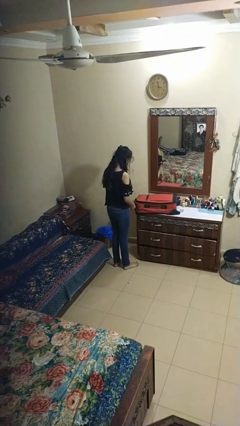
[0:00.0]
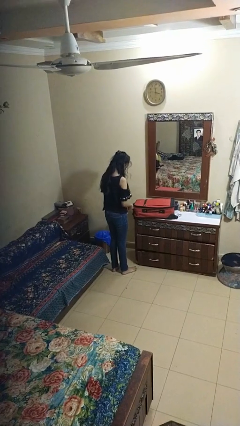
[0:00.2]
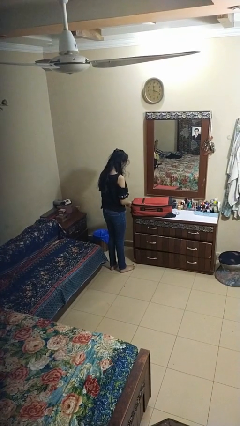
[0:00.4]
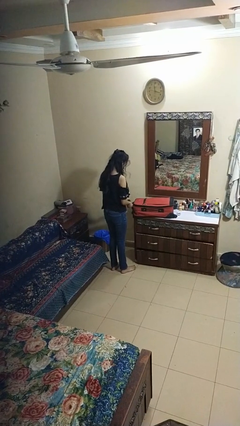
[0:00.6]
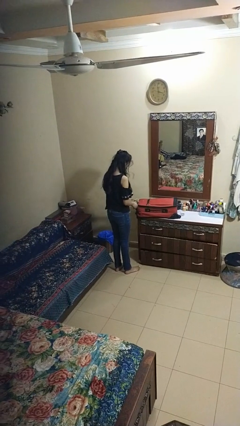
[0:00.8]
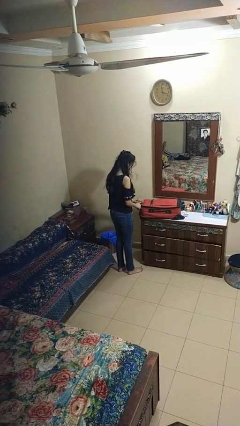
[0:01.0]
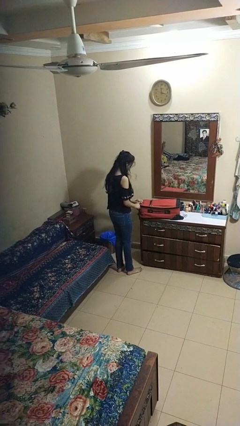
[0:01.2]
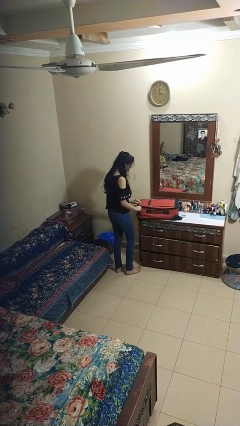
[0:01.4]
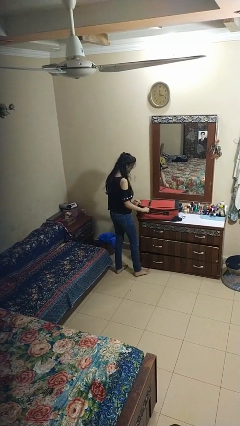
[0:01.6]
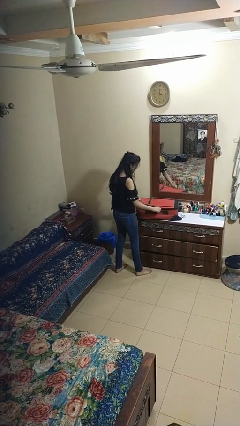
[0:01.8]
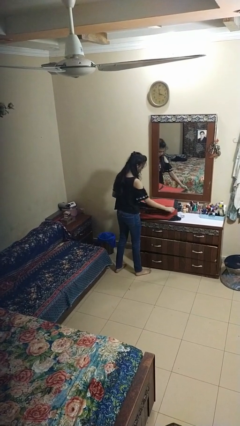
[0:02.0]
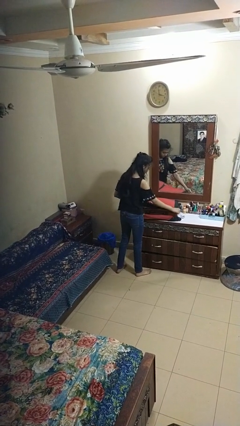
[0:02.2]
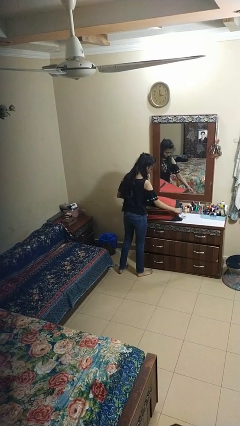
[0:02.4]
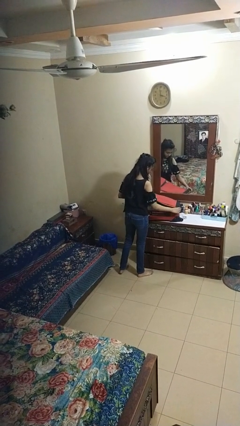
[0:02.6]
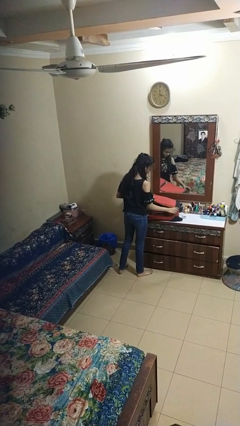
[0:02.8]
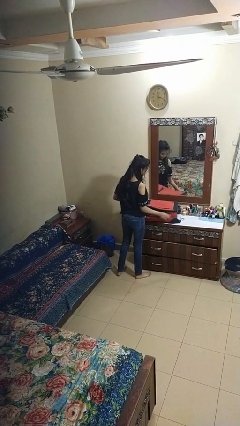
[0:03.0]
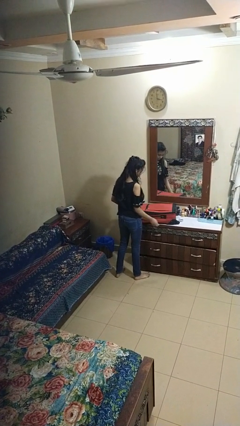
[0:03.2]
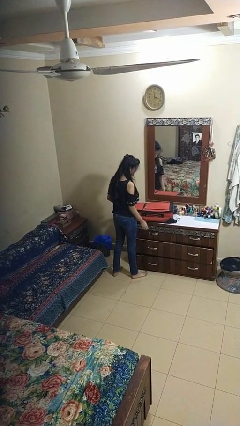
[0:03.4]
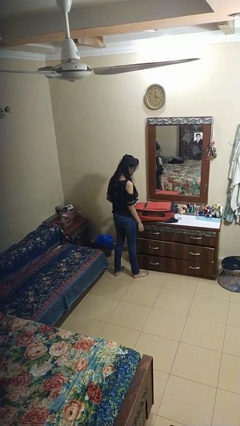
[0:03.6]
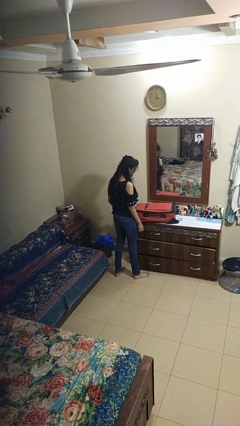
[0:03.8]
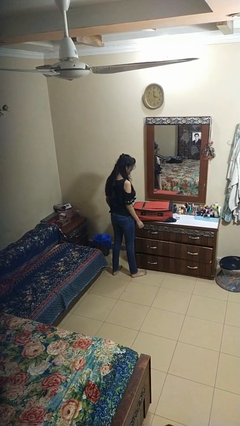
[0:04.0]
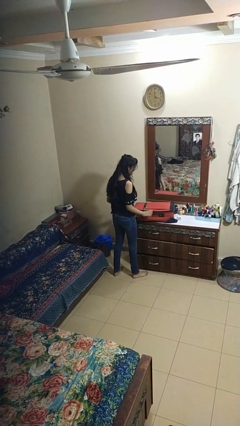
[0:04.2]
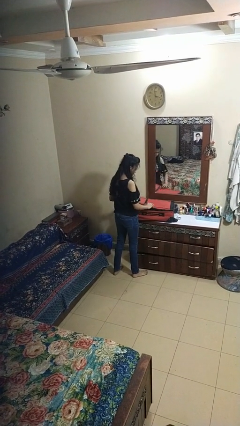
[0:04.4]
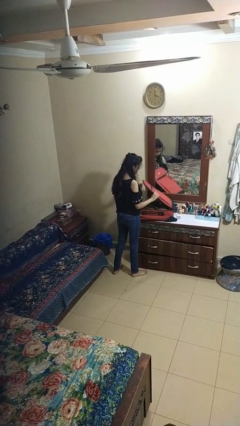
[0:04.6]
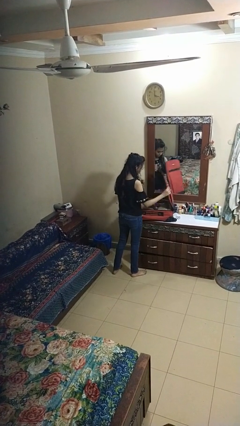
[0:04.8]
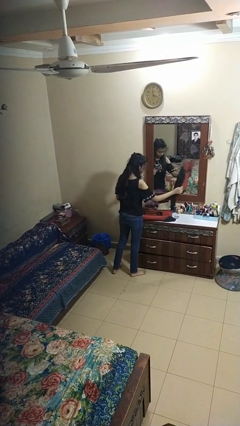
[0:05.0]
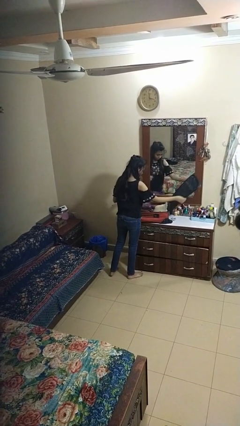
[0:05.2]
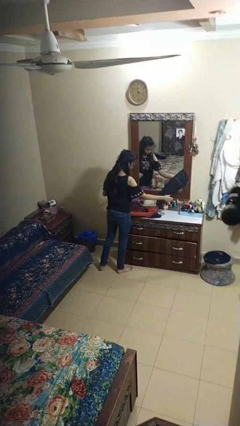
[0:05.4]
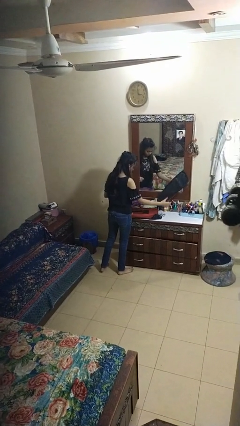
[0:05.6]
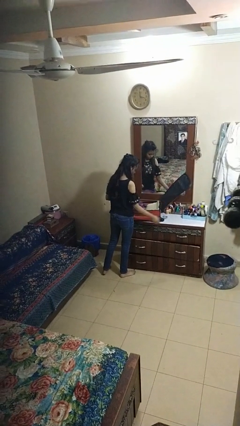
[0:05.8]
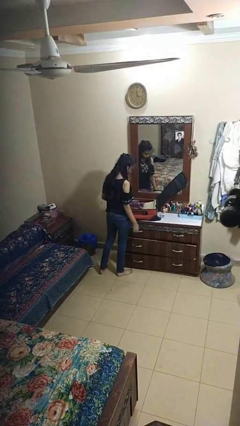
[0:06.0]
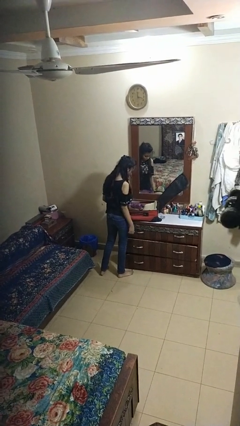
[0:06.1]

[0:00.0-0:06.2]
person opens suitcase

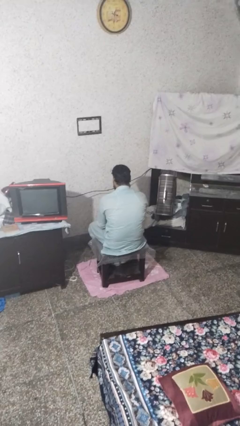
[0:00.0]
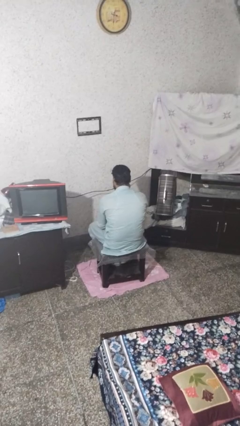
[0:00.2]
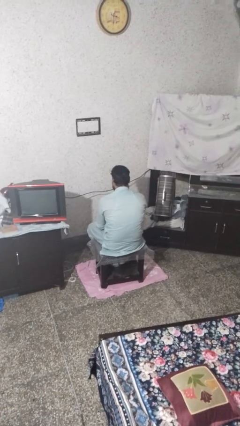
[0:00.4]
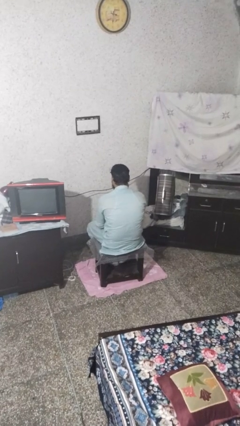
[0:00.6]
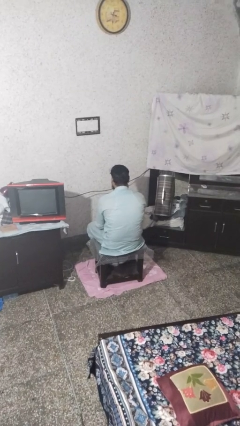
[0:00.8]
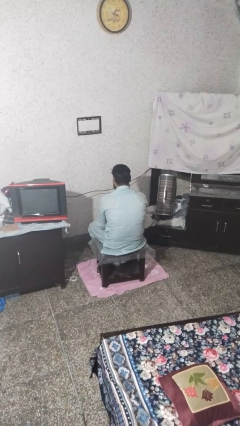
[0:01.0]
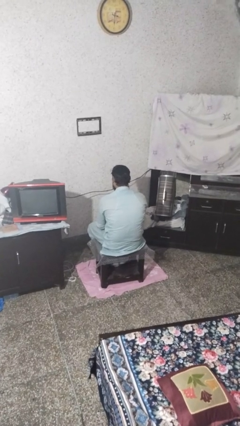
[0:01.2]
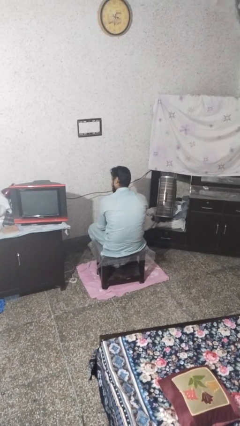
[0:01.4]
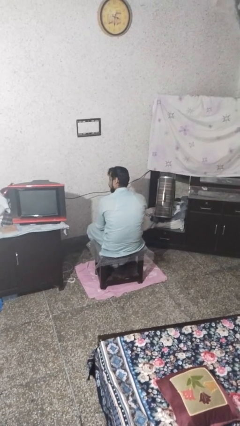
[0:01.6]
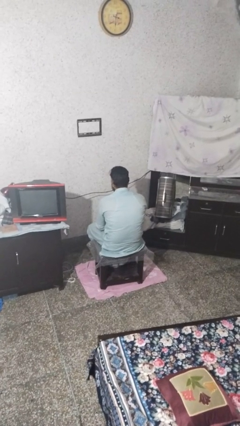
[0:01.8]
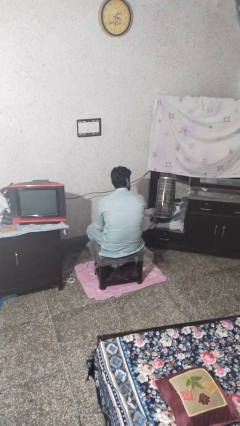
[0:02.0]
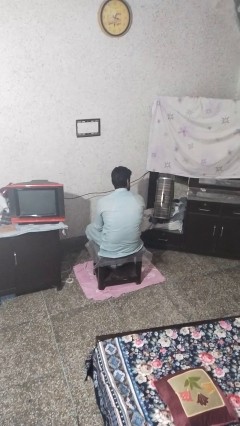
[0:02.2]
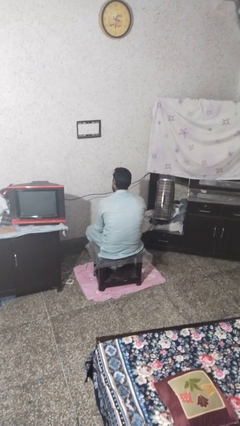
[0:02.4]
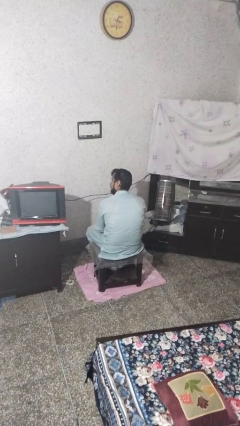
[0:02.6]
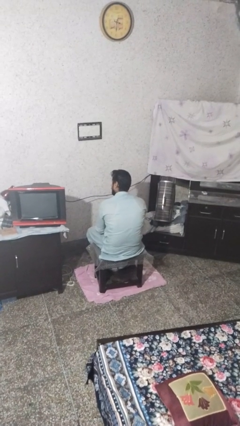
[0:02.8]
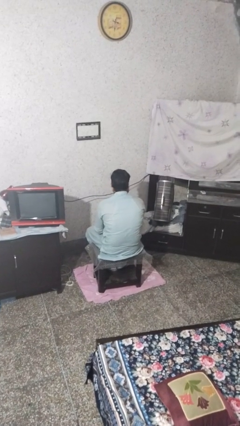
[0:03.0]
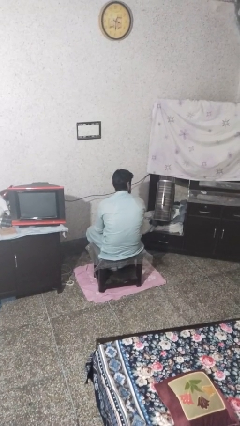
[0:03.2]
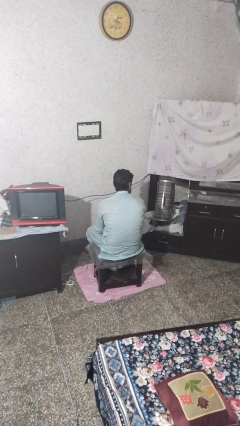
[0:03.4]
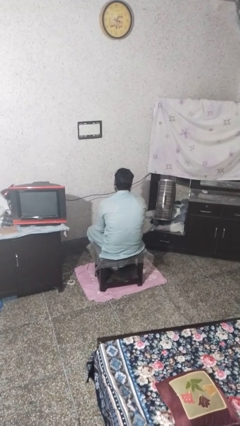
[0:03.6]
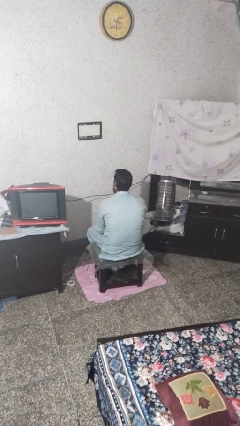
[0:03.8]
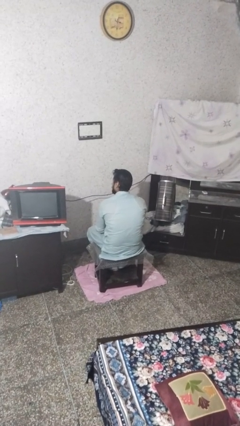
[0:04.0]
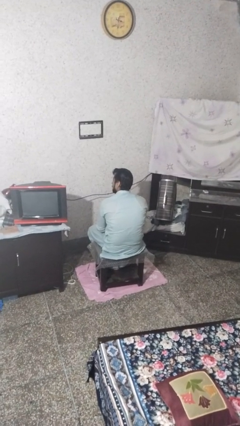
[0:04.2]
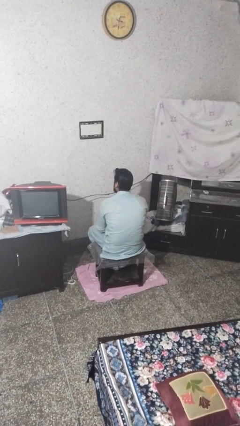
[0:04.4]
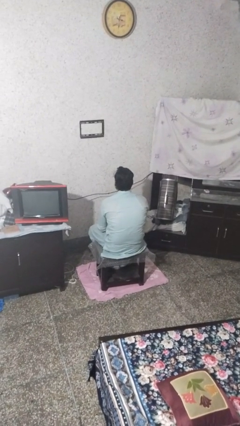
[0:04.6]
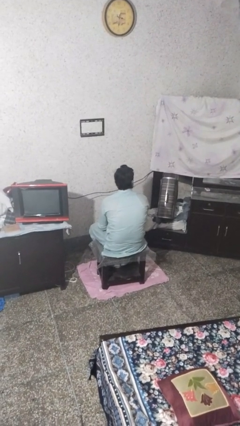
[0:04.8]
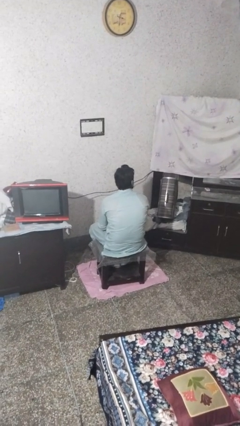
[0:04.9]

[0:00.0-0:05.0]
person shakes head

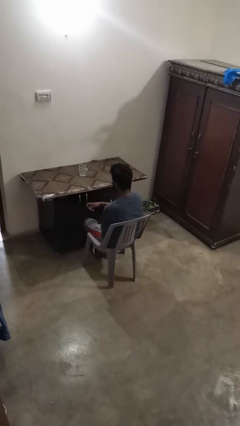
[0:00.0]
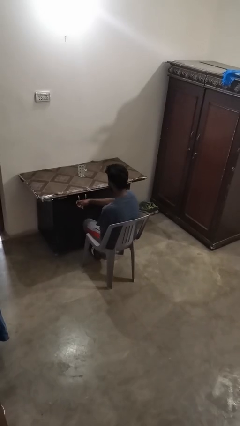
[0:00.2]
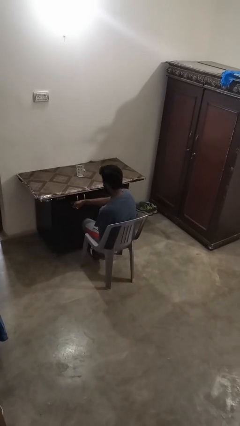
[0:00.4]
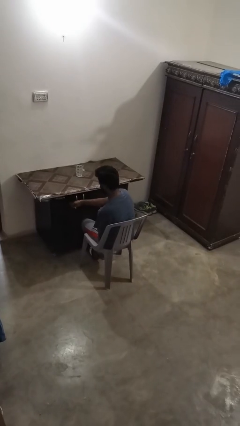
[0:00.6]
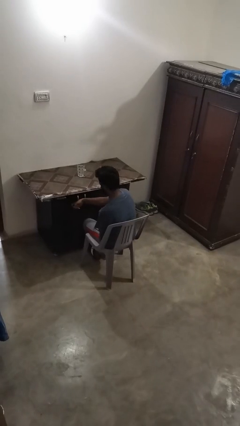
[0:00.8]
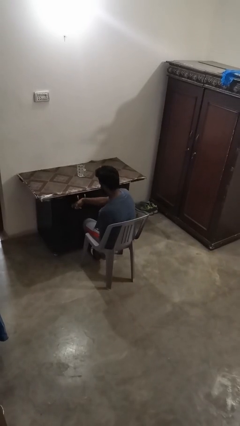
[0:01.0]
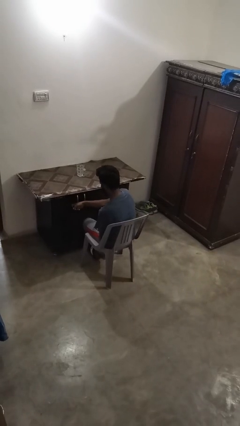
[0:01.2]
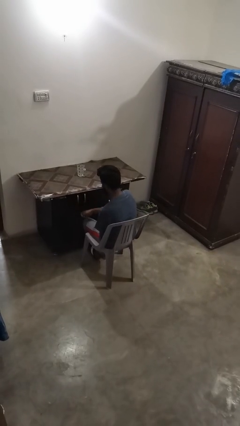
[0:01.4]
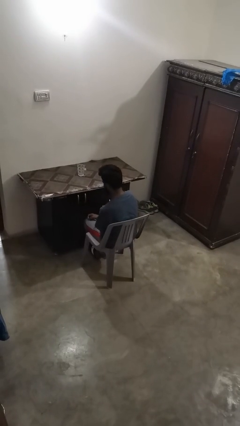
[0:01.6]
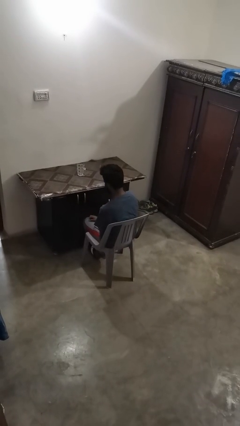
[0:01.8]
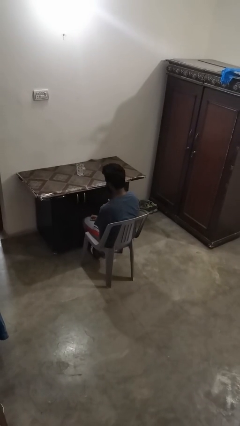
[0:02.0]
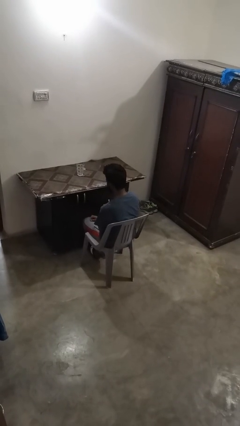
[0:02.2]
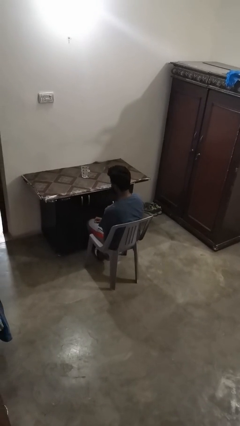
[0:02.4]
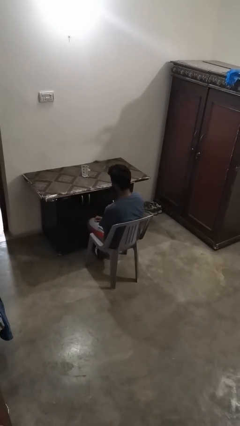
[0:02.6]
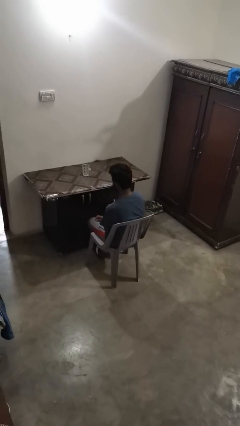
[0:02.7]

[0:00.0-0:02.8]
person knocks over furniture

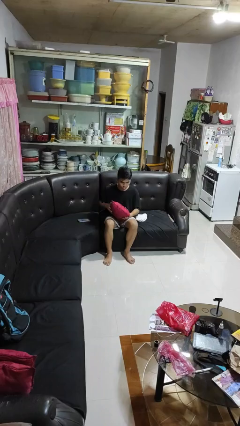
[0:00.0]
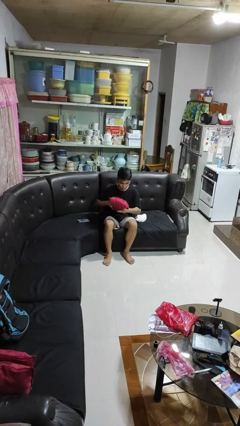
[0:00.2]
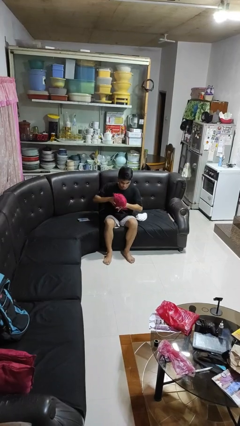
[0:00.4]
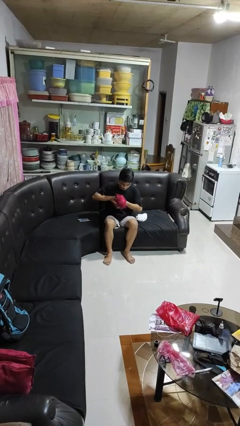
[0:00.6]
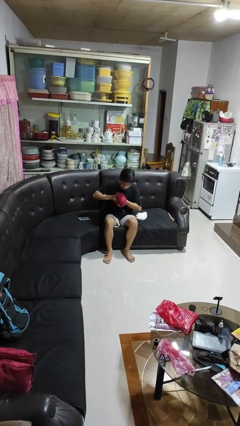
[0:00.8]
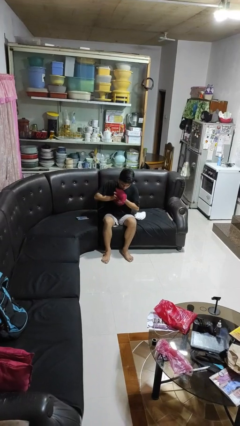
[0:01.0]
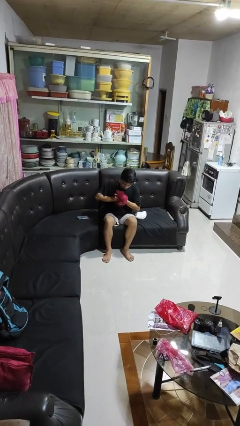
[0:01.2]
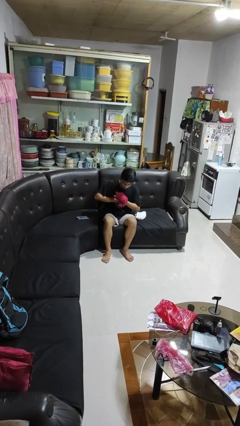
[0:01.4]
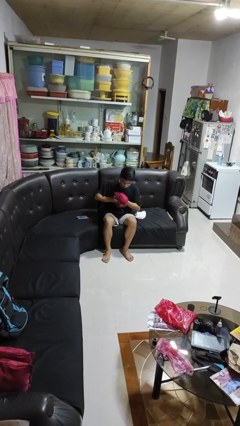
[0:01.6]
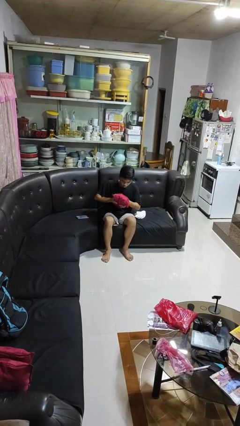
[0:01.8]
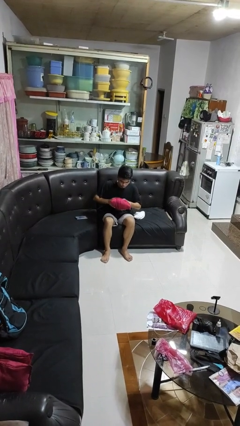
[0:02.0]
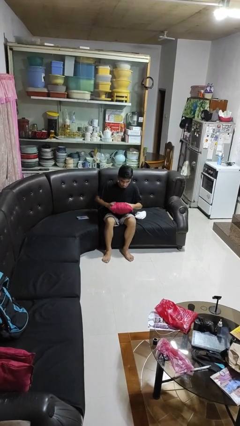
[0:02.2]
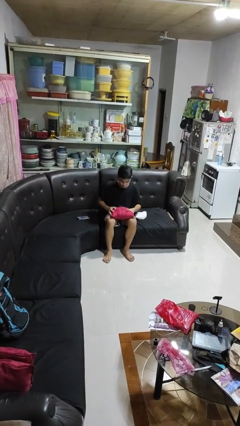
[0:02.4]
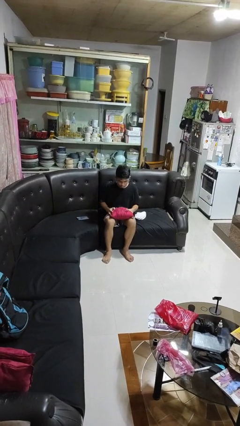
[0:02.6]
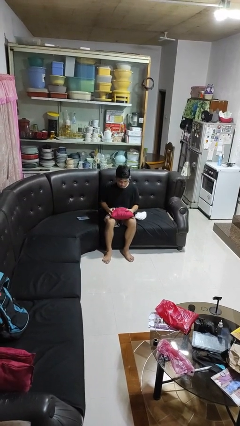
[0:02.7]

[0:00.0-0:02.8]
person squeezes object

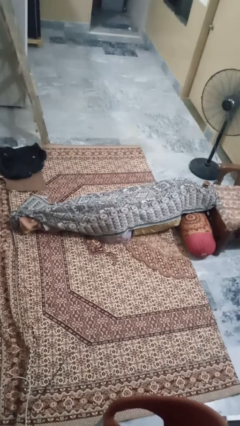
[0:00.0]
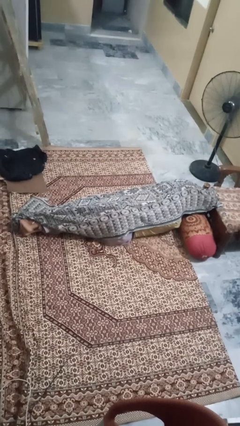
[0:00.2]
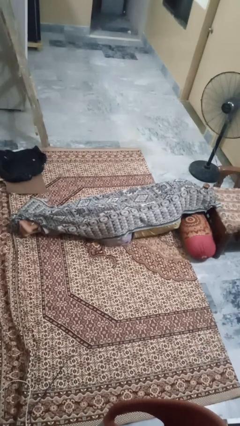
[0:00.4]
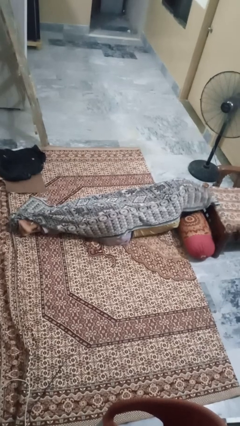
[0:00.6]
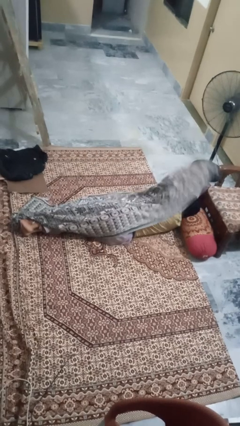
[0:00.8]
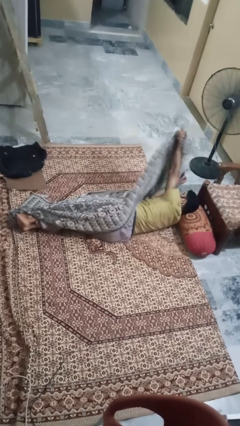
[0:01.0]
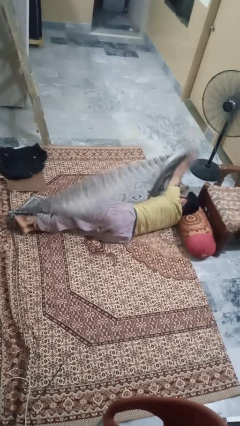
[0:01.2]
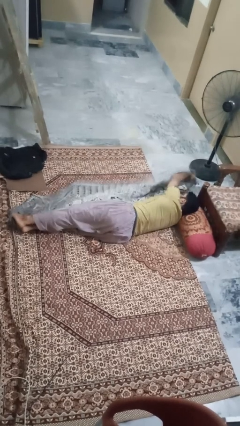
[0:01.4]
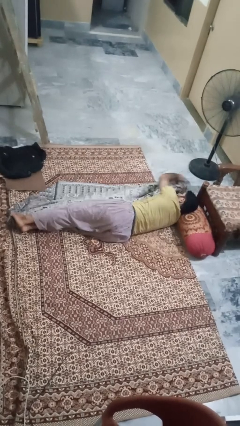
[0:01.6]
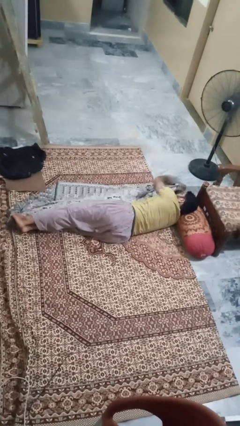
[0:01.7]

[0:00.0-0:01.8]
person uncovers with blanket
